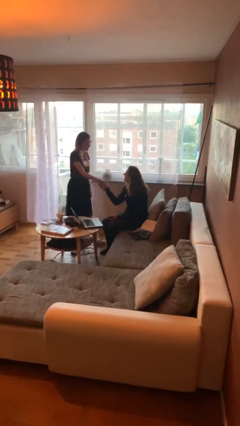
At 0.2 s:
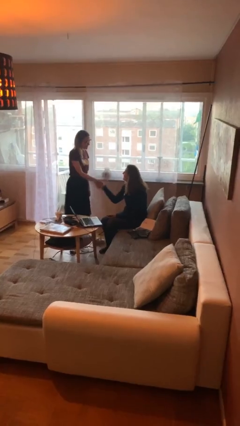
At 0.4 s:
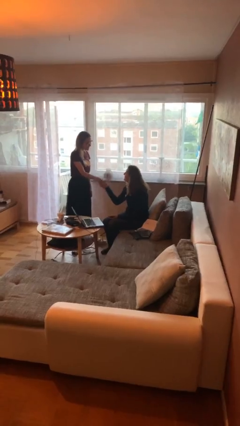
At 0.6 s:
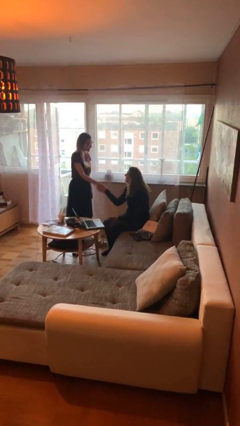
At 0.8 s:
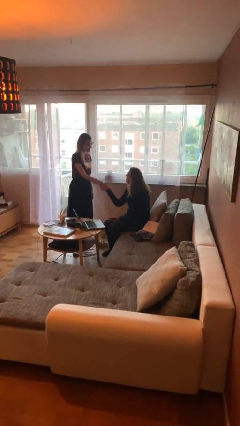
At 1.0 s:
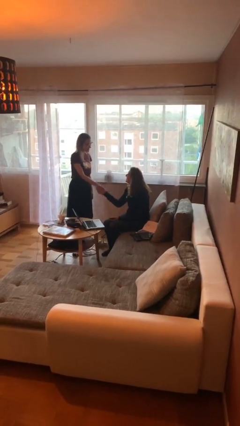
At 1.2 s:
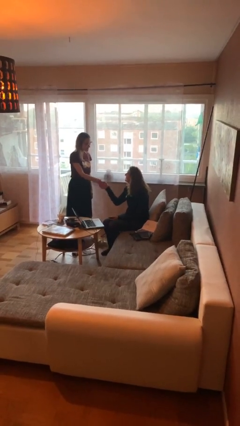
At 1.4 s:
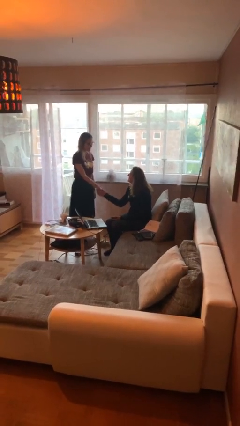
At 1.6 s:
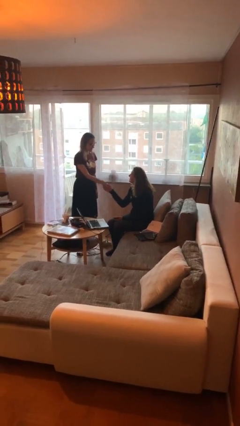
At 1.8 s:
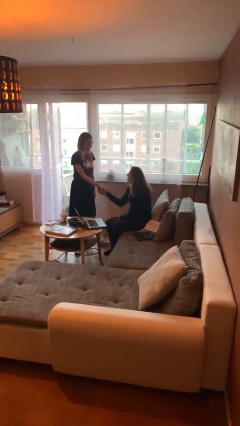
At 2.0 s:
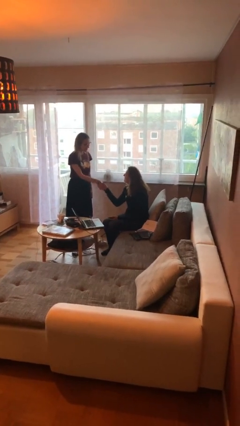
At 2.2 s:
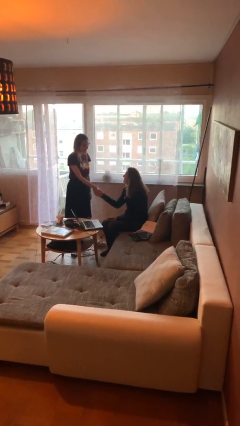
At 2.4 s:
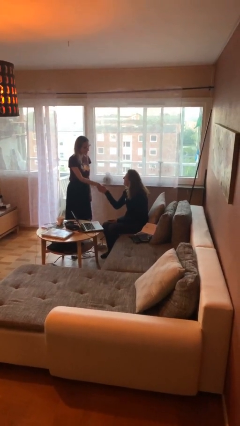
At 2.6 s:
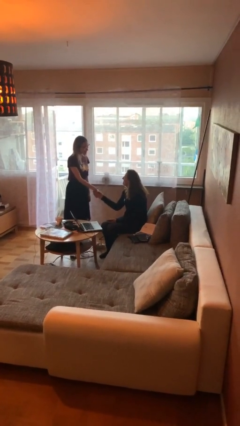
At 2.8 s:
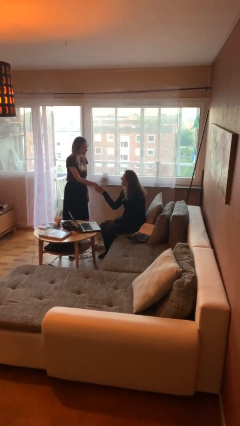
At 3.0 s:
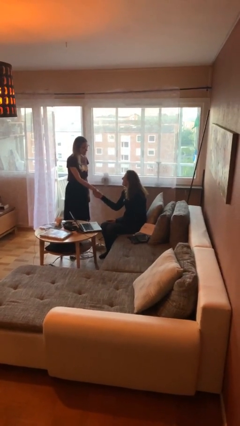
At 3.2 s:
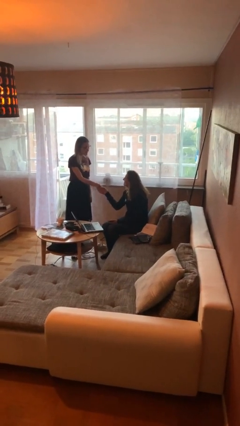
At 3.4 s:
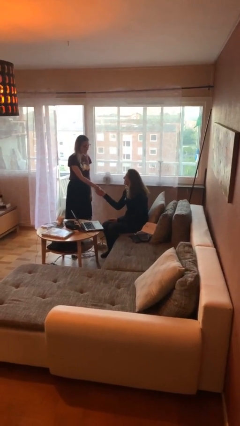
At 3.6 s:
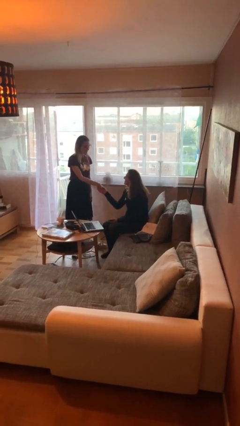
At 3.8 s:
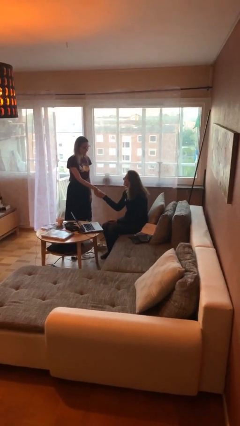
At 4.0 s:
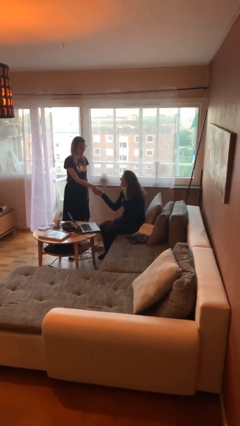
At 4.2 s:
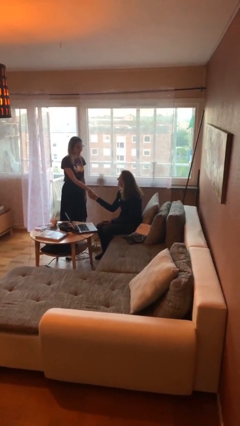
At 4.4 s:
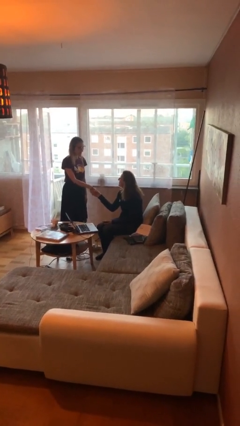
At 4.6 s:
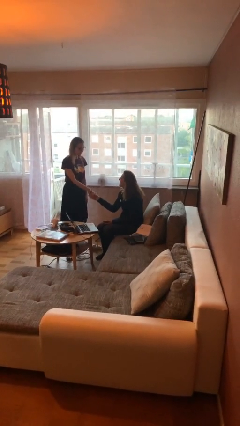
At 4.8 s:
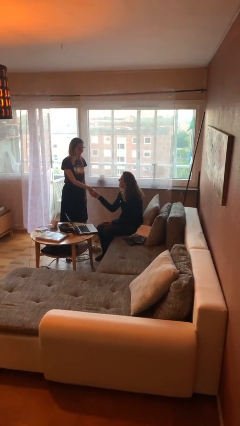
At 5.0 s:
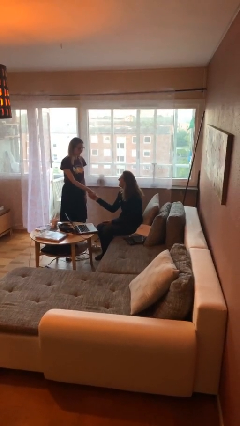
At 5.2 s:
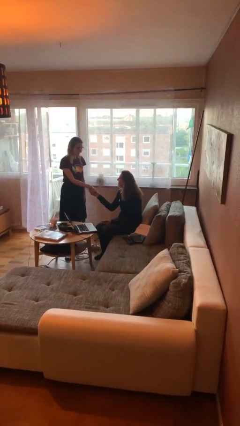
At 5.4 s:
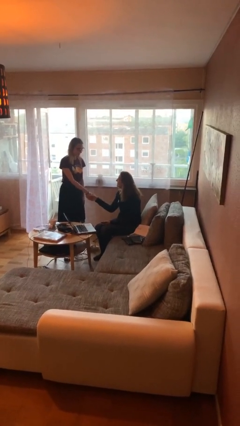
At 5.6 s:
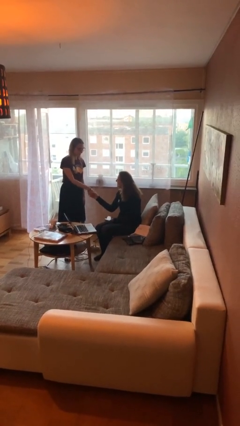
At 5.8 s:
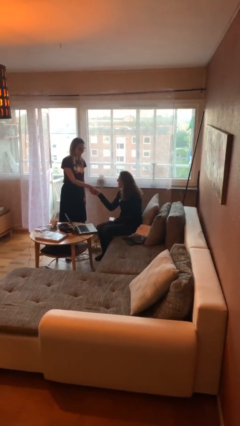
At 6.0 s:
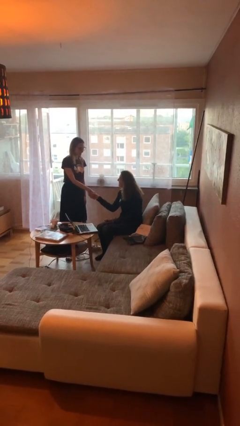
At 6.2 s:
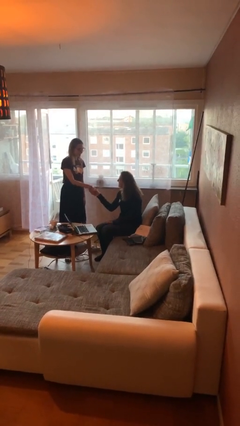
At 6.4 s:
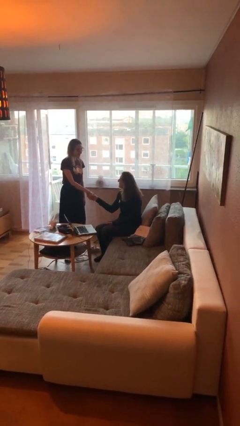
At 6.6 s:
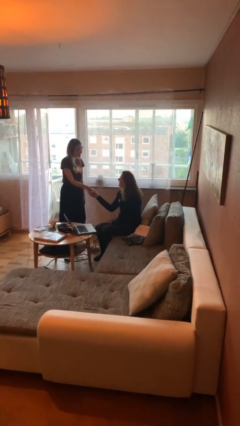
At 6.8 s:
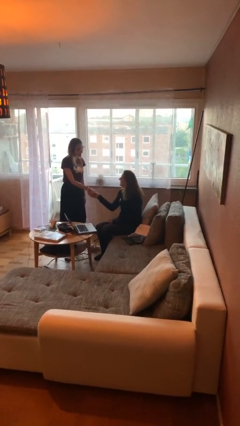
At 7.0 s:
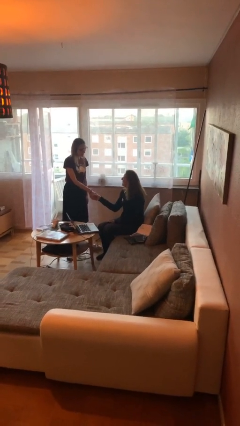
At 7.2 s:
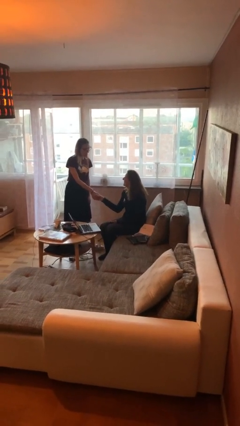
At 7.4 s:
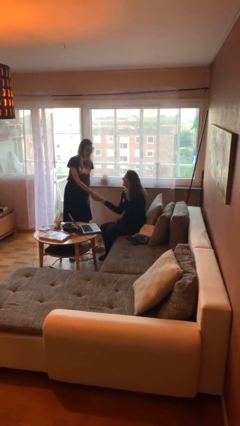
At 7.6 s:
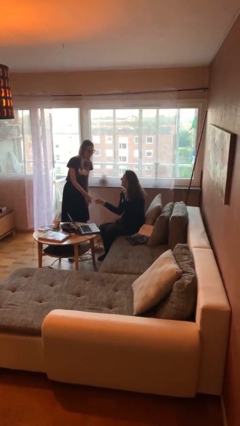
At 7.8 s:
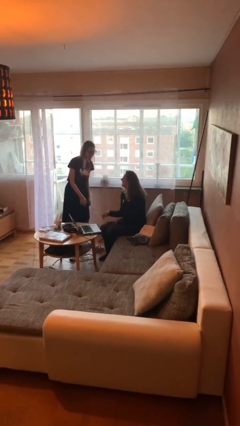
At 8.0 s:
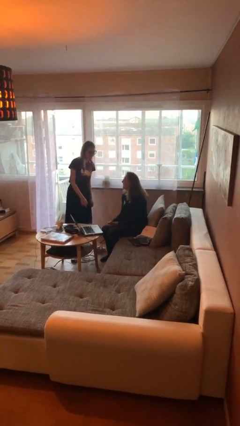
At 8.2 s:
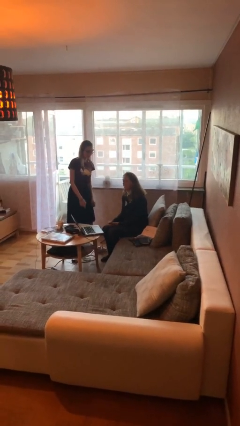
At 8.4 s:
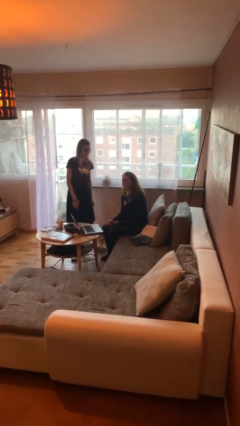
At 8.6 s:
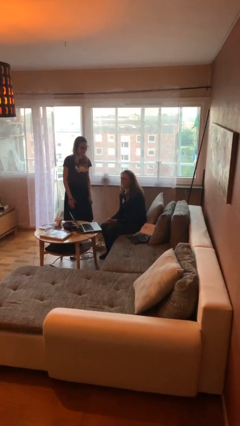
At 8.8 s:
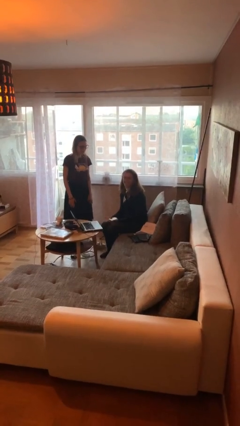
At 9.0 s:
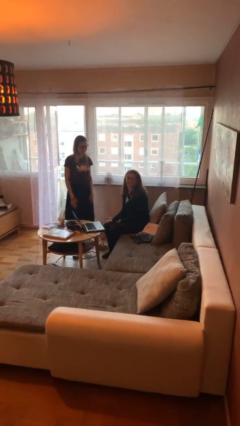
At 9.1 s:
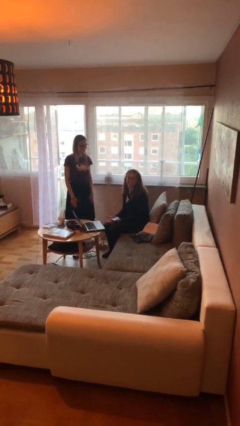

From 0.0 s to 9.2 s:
person shakes hand

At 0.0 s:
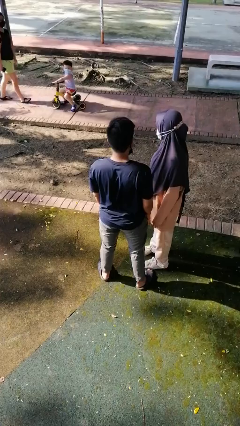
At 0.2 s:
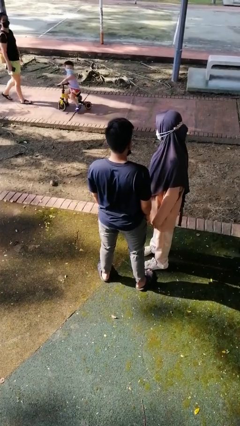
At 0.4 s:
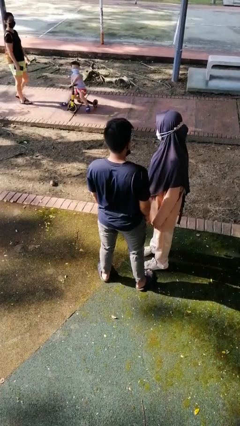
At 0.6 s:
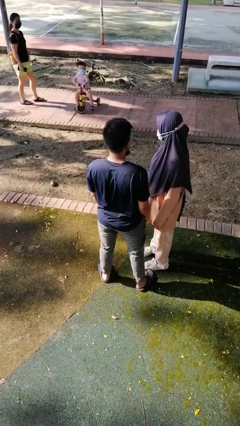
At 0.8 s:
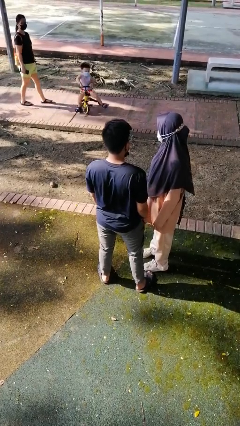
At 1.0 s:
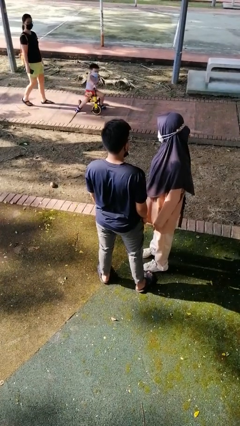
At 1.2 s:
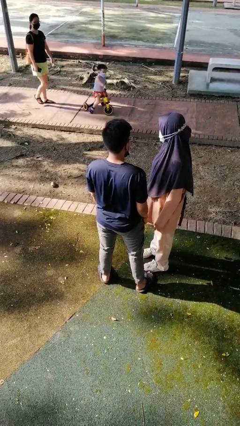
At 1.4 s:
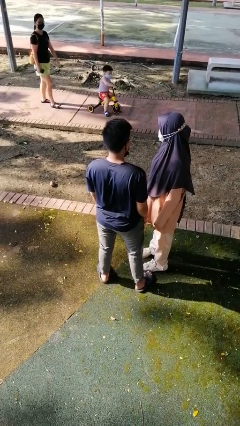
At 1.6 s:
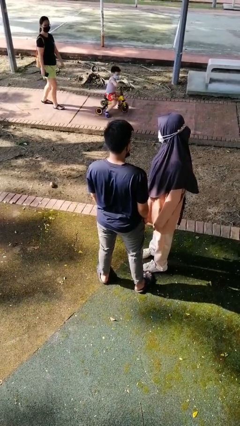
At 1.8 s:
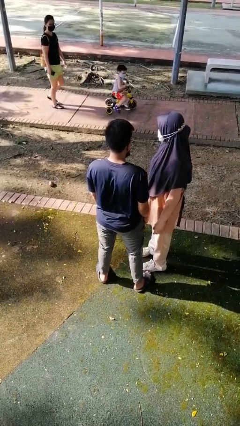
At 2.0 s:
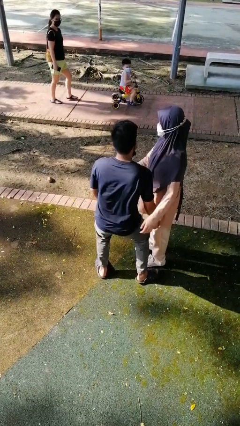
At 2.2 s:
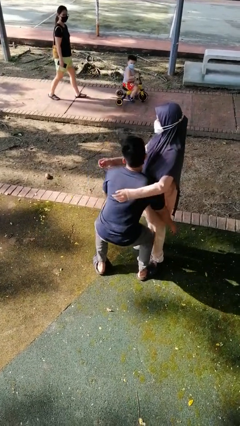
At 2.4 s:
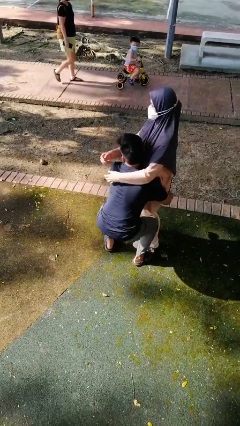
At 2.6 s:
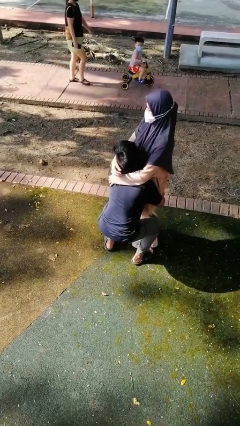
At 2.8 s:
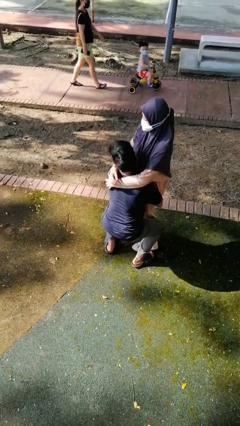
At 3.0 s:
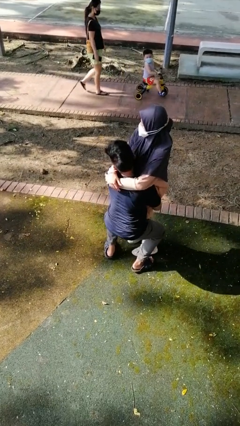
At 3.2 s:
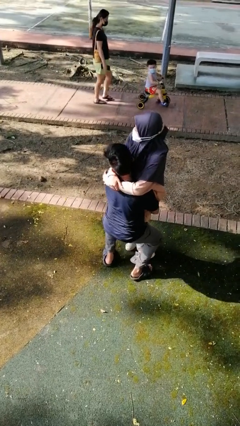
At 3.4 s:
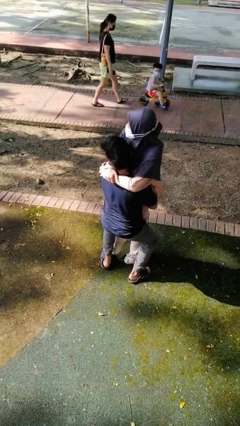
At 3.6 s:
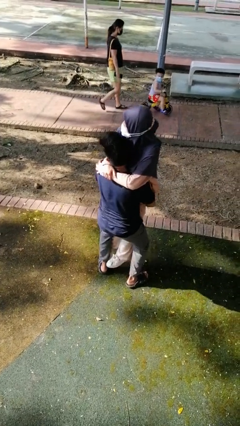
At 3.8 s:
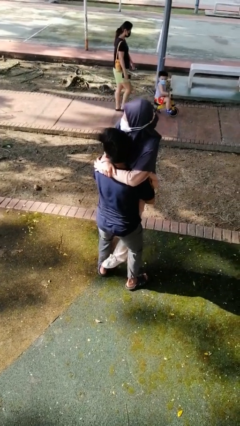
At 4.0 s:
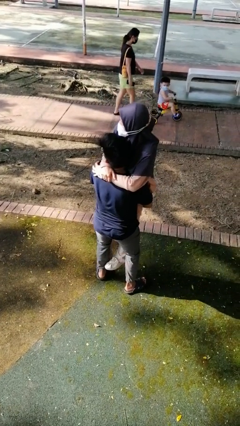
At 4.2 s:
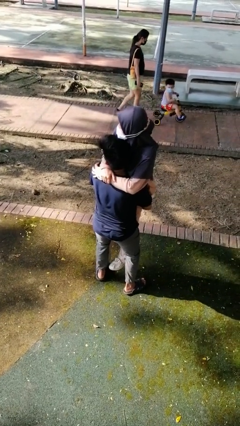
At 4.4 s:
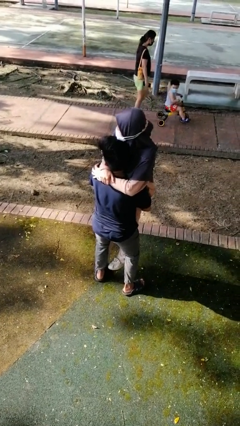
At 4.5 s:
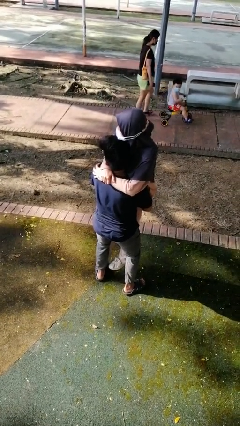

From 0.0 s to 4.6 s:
person picks up person

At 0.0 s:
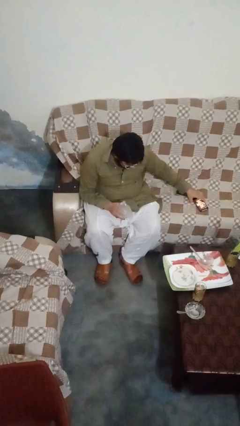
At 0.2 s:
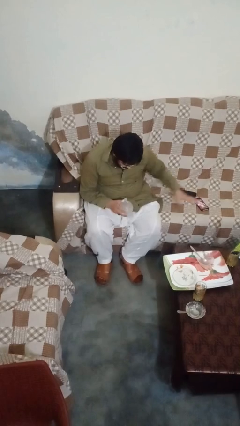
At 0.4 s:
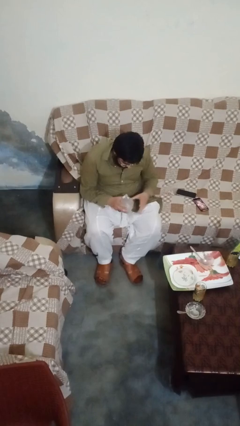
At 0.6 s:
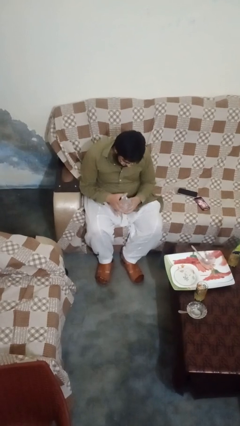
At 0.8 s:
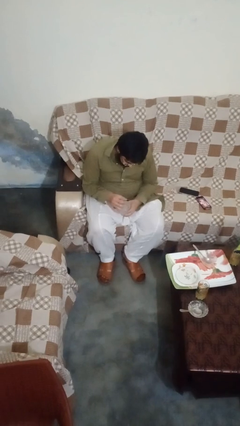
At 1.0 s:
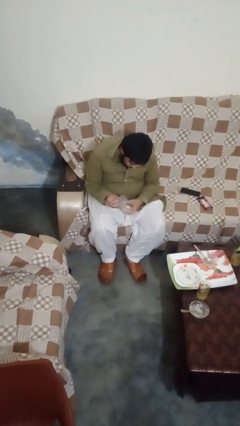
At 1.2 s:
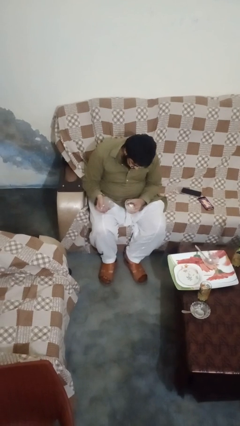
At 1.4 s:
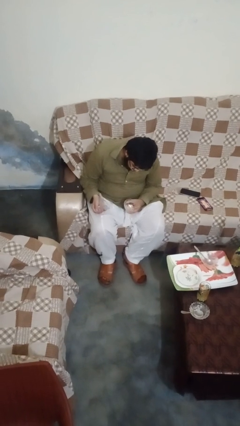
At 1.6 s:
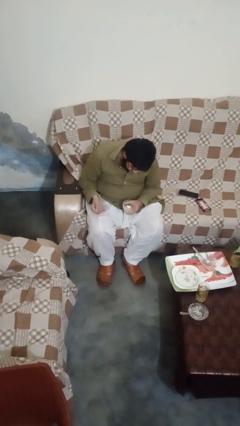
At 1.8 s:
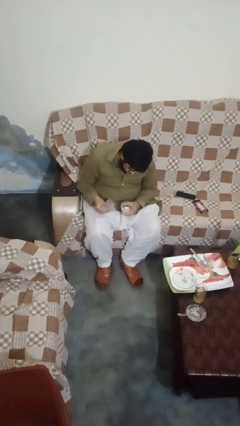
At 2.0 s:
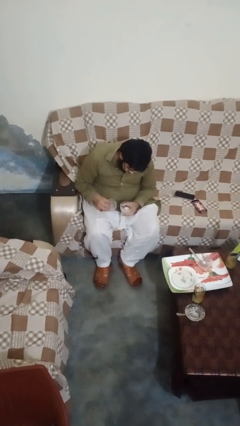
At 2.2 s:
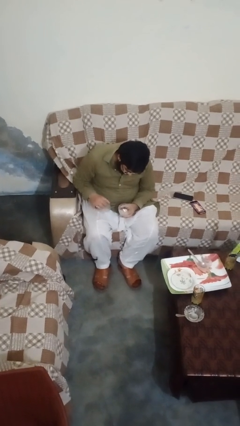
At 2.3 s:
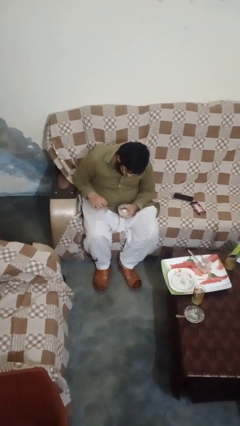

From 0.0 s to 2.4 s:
person opens jewelry box

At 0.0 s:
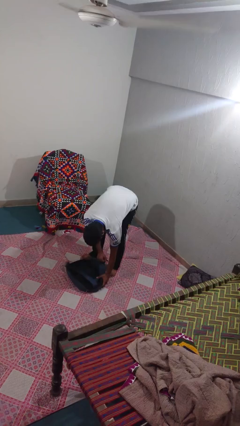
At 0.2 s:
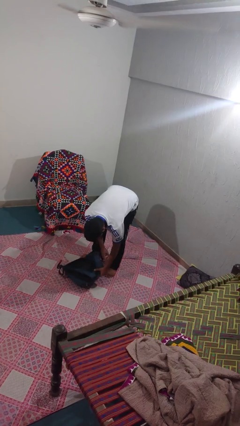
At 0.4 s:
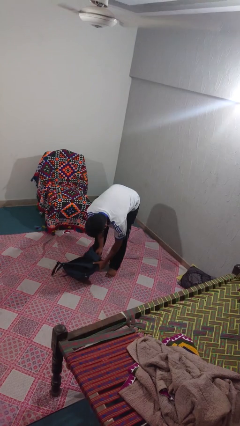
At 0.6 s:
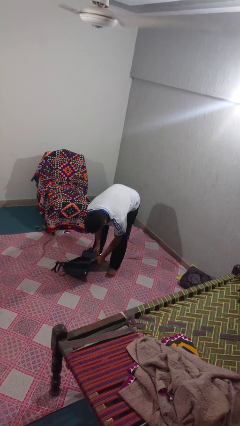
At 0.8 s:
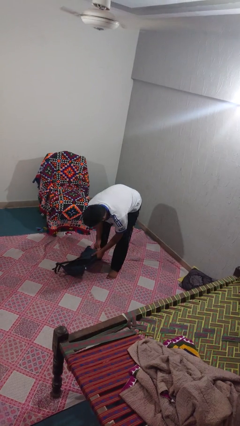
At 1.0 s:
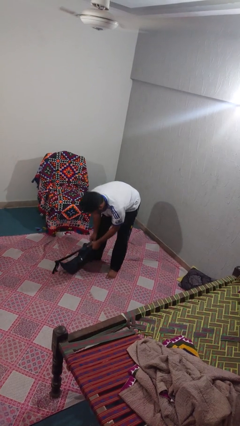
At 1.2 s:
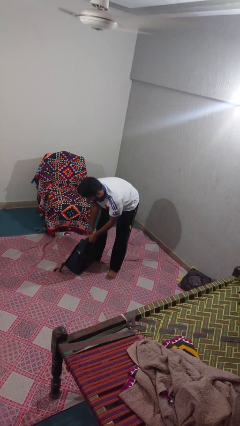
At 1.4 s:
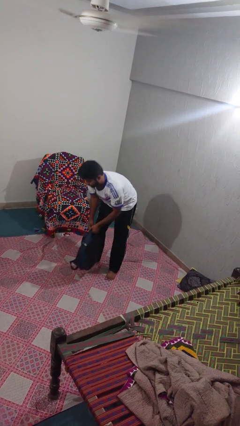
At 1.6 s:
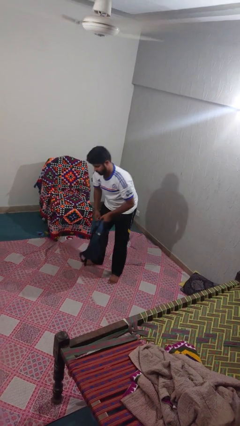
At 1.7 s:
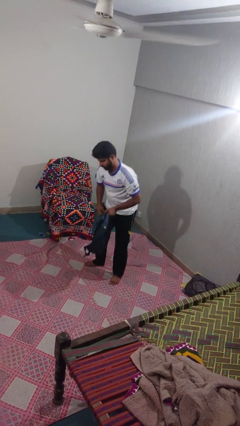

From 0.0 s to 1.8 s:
person picks up object from floor
